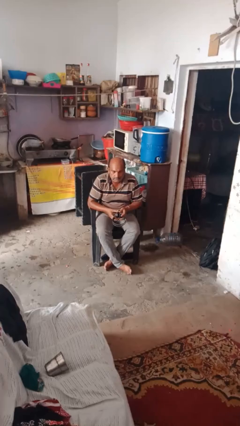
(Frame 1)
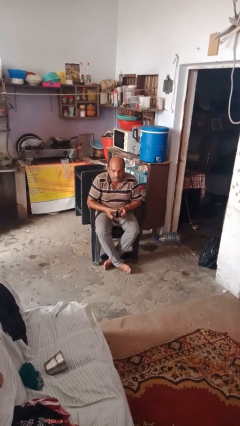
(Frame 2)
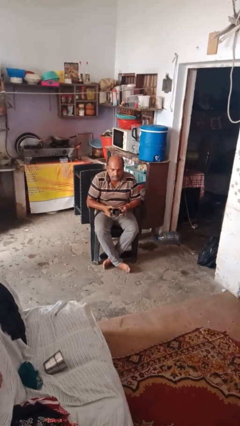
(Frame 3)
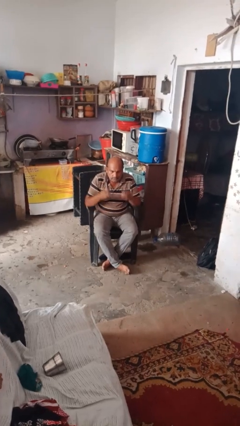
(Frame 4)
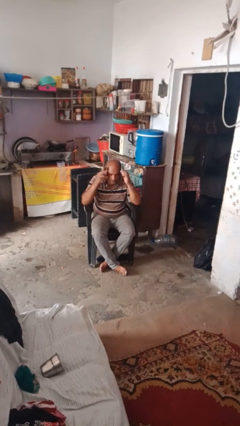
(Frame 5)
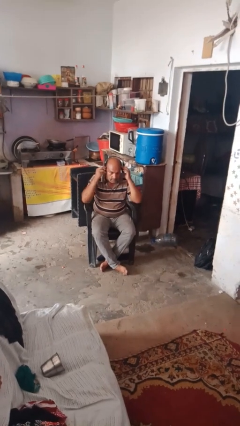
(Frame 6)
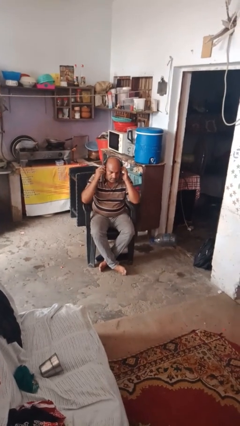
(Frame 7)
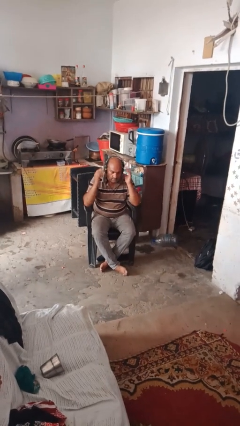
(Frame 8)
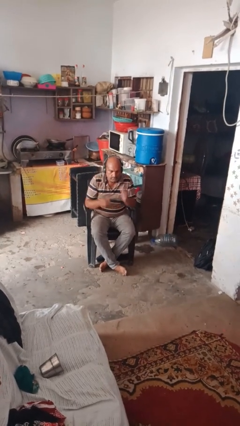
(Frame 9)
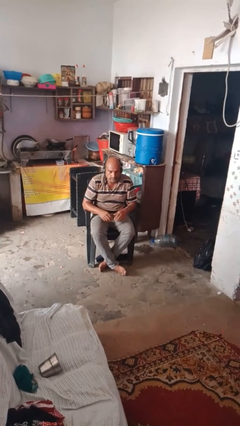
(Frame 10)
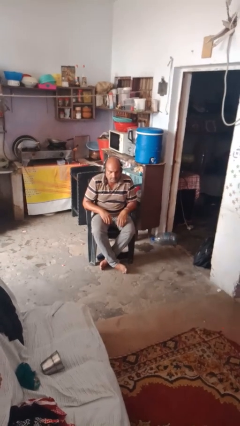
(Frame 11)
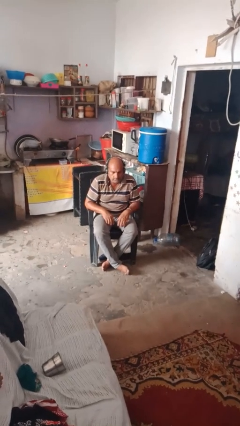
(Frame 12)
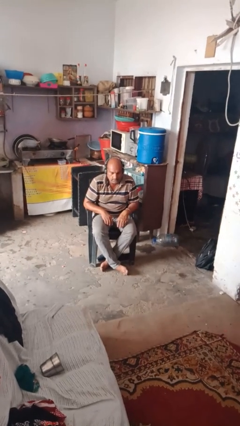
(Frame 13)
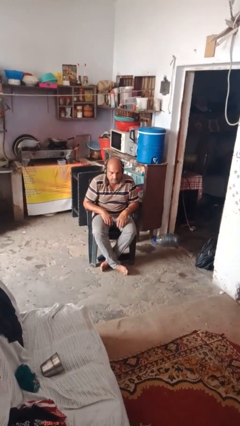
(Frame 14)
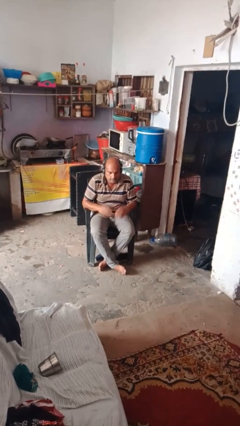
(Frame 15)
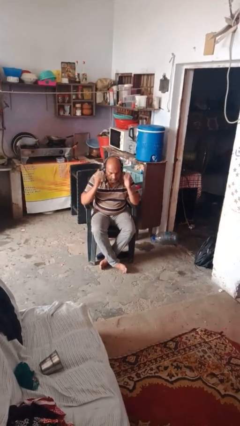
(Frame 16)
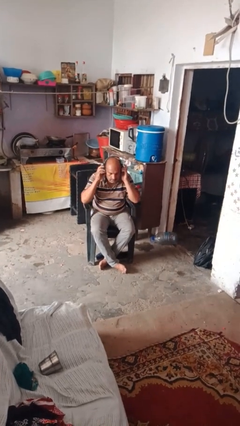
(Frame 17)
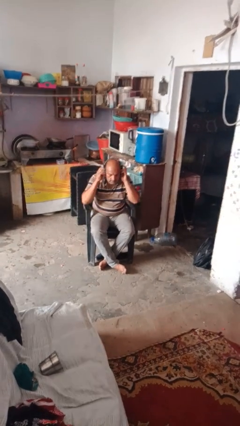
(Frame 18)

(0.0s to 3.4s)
person puts on headphones

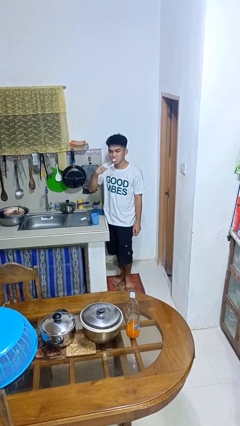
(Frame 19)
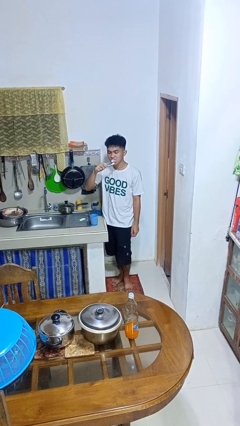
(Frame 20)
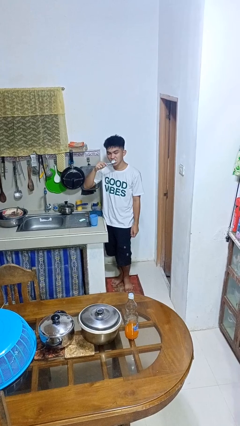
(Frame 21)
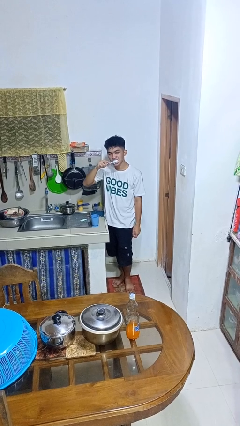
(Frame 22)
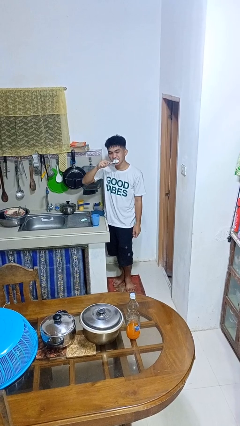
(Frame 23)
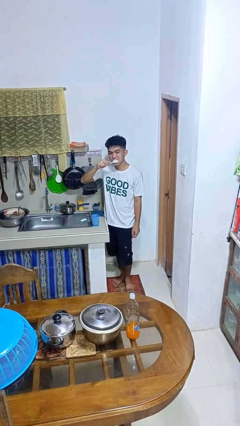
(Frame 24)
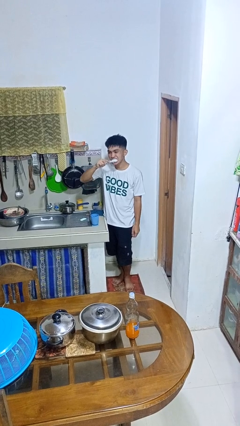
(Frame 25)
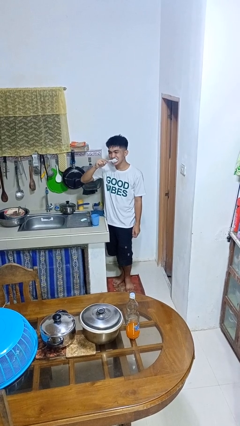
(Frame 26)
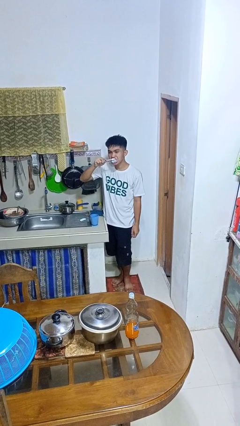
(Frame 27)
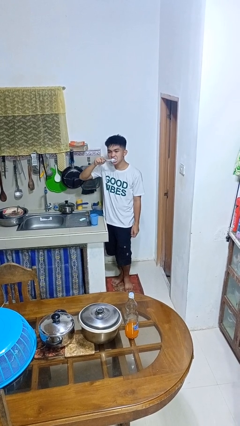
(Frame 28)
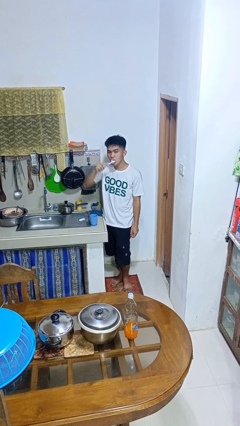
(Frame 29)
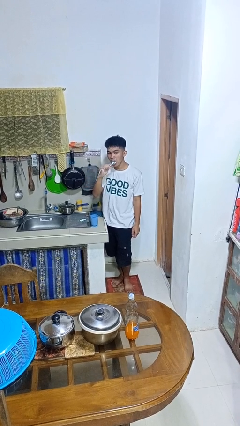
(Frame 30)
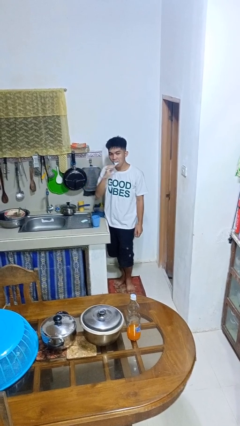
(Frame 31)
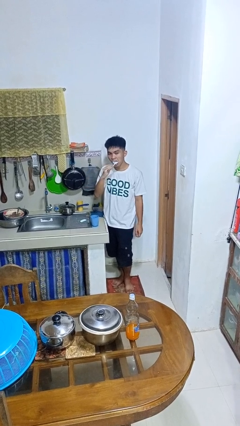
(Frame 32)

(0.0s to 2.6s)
person brushes teeth

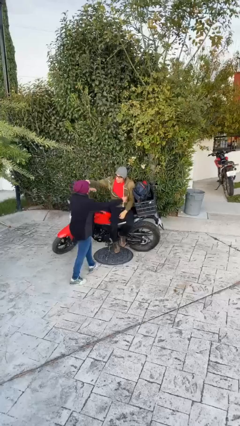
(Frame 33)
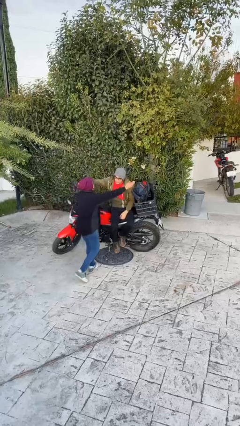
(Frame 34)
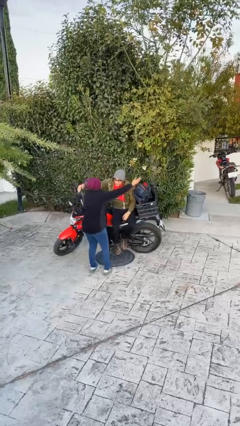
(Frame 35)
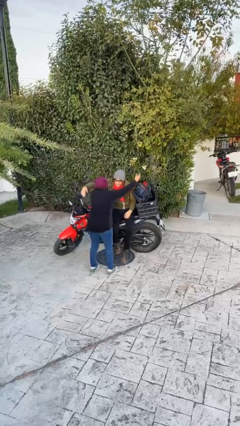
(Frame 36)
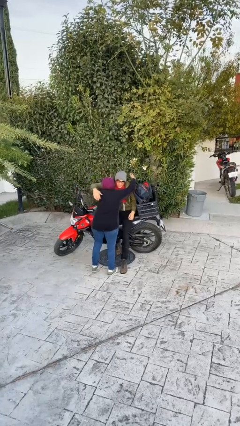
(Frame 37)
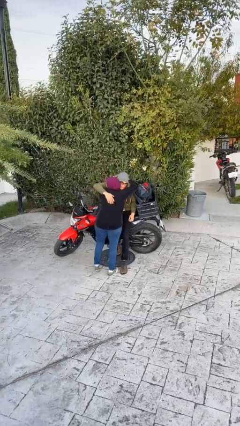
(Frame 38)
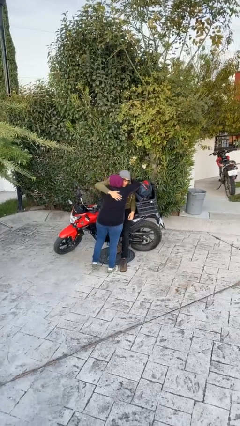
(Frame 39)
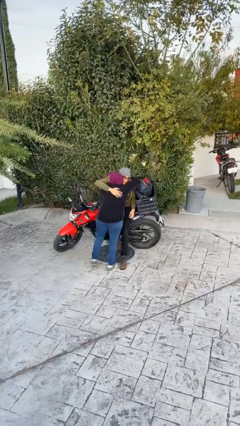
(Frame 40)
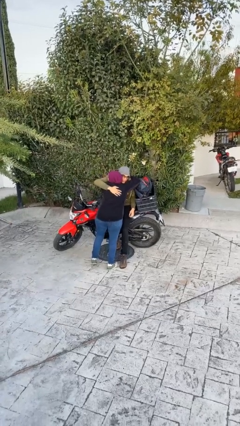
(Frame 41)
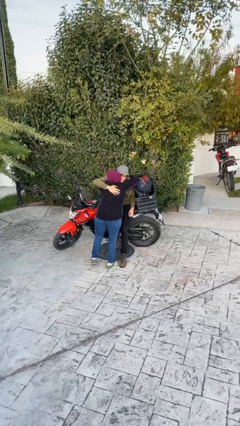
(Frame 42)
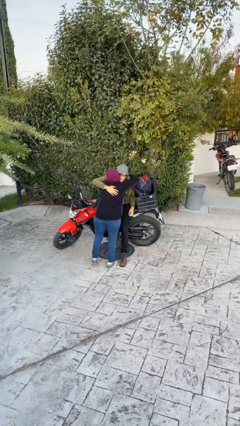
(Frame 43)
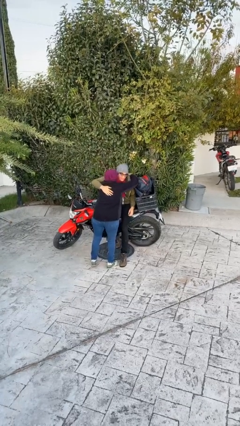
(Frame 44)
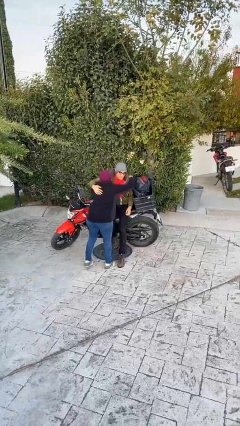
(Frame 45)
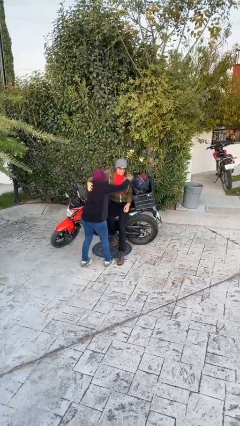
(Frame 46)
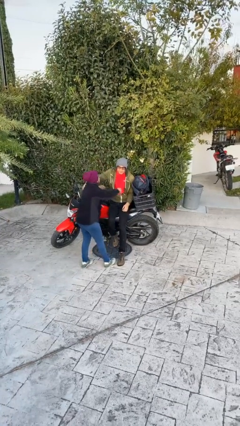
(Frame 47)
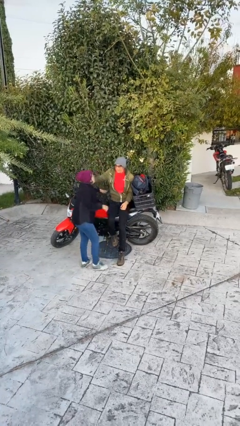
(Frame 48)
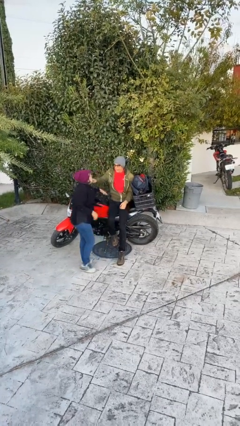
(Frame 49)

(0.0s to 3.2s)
person embraces person

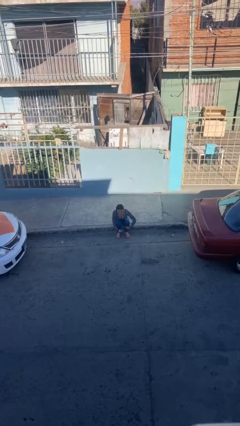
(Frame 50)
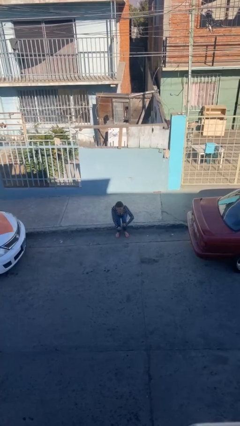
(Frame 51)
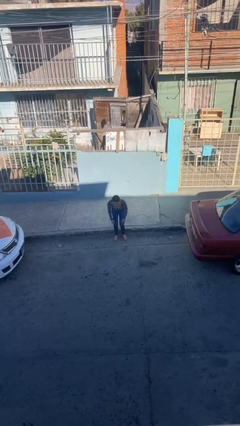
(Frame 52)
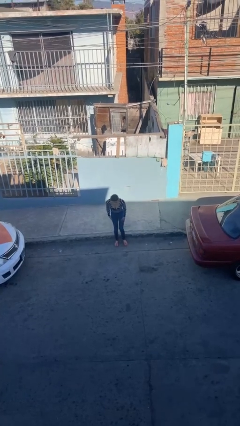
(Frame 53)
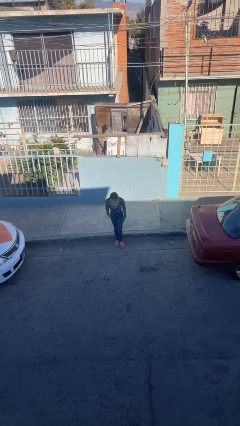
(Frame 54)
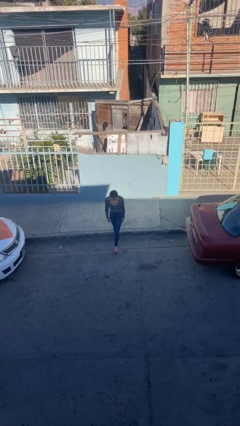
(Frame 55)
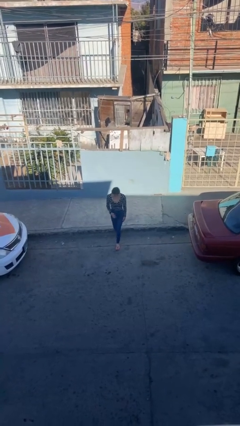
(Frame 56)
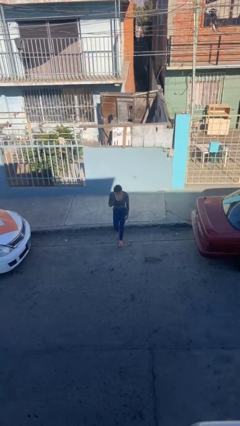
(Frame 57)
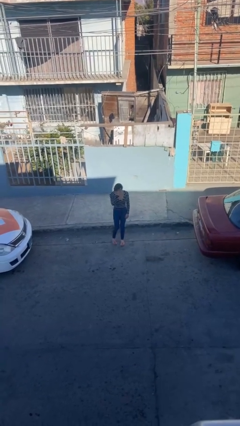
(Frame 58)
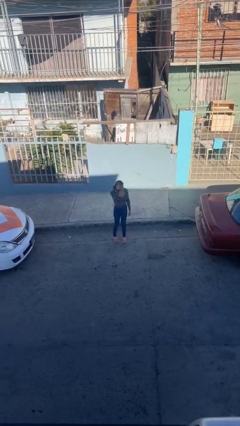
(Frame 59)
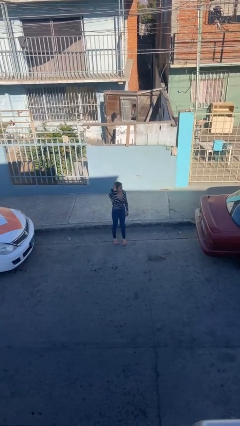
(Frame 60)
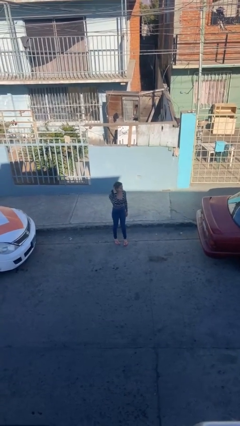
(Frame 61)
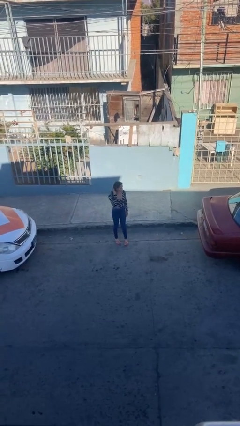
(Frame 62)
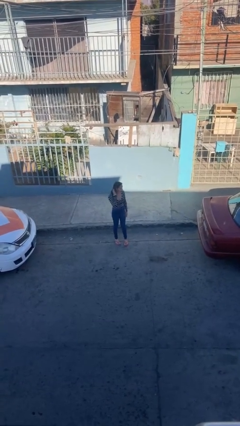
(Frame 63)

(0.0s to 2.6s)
person stands up

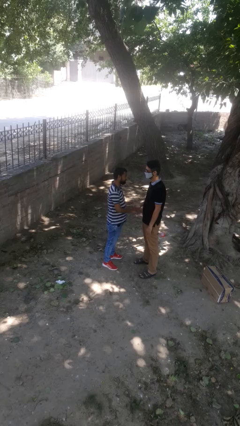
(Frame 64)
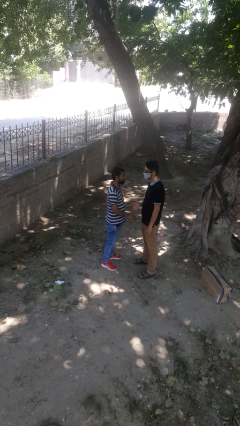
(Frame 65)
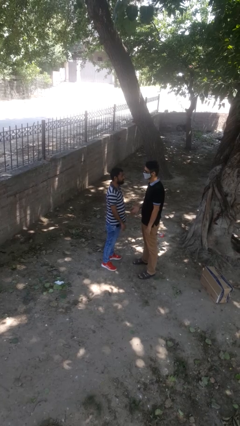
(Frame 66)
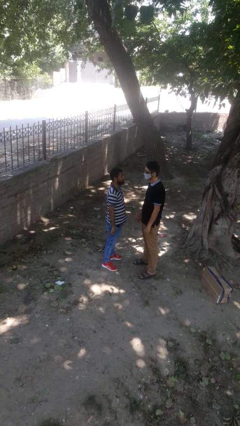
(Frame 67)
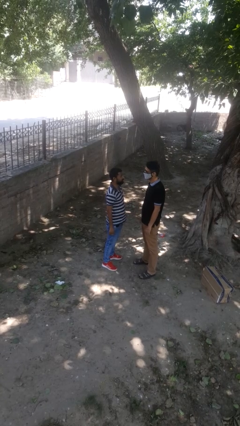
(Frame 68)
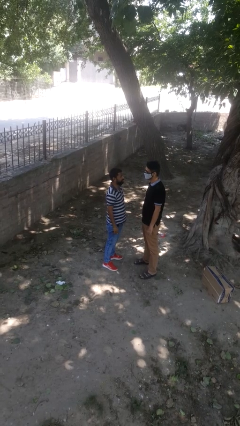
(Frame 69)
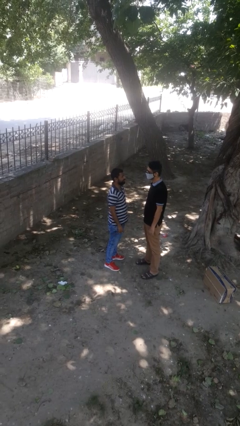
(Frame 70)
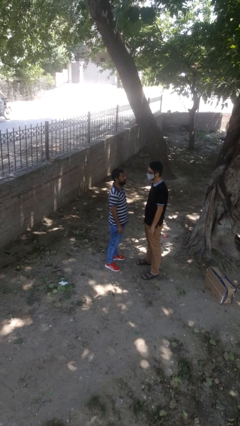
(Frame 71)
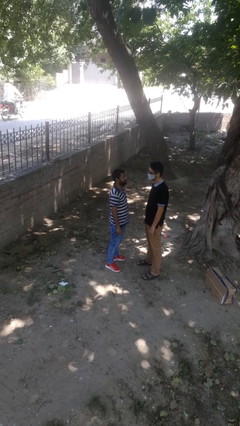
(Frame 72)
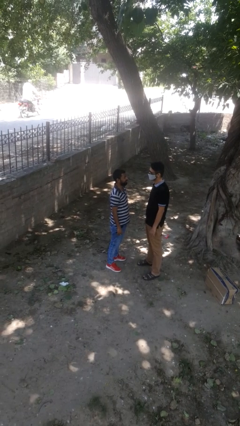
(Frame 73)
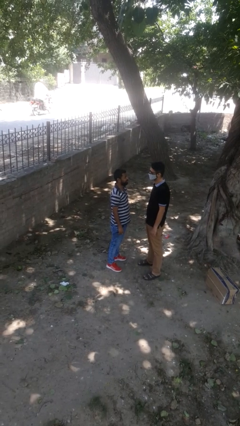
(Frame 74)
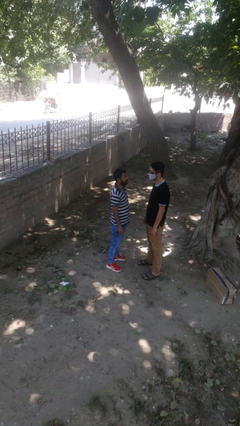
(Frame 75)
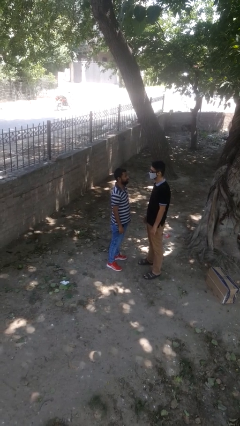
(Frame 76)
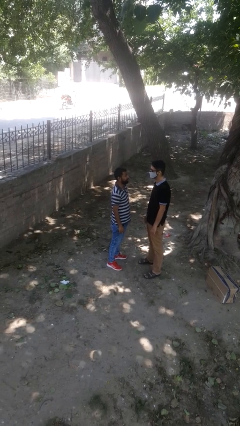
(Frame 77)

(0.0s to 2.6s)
person highfives hand

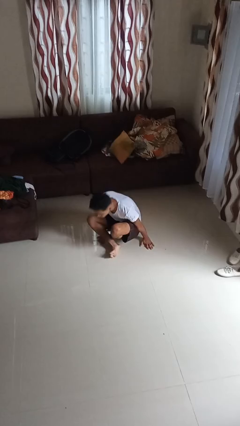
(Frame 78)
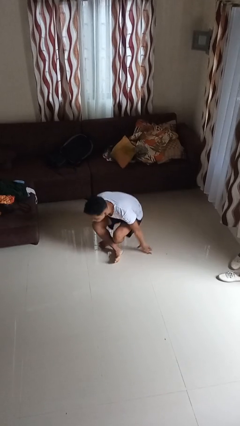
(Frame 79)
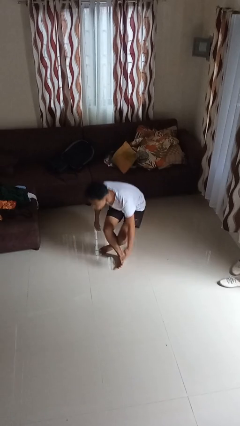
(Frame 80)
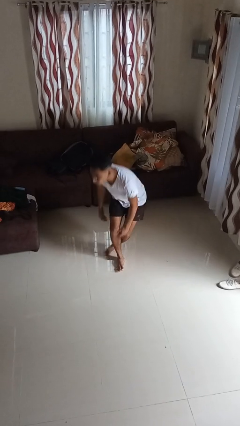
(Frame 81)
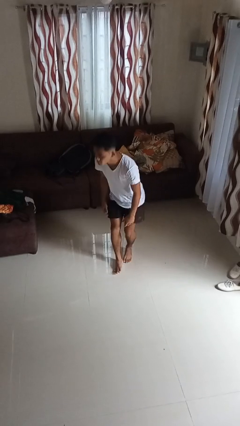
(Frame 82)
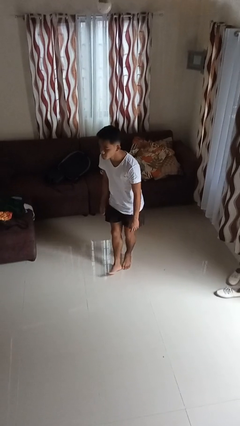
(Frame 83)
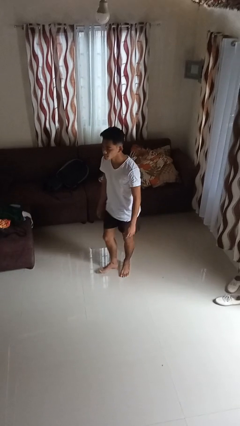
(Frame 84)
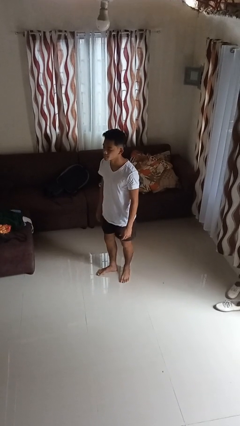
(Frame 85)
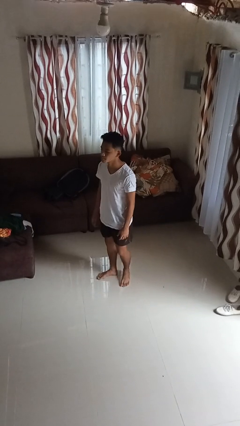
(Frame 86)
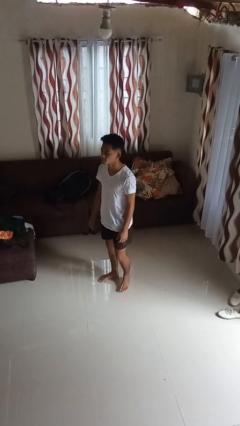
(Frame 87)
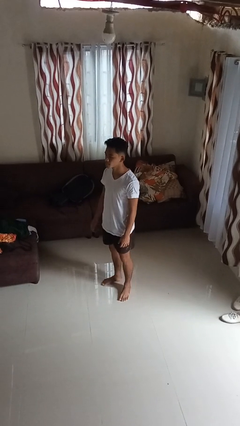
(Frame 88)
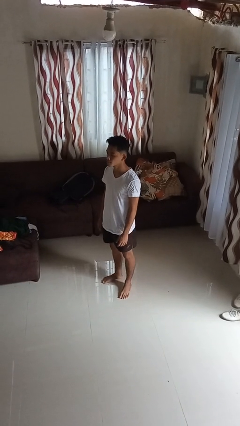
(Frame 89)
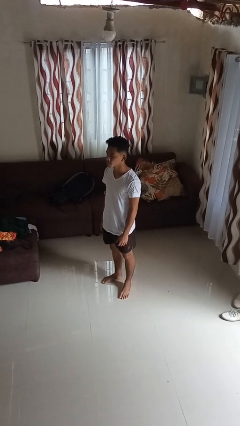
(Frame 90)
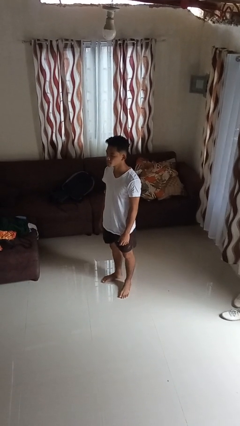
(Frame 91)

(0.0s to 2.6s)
person stands up from floor
